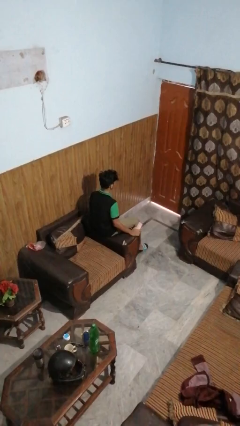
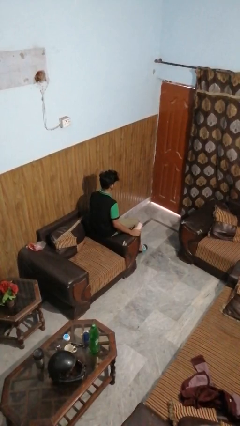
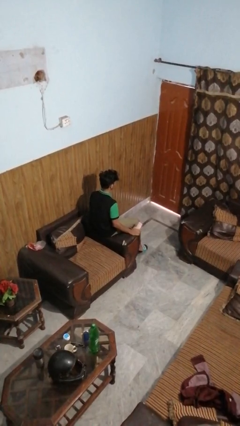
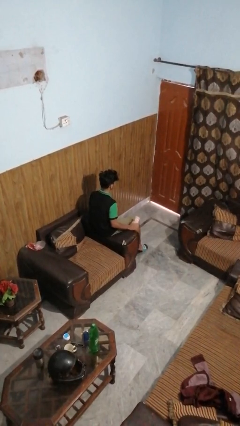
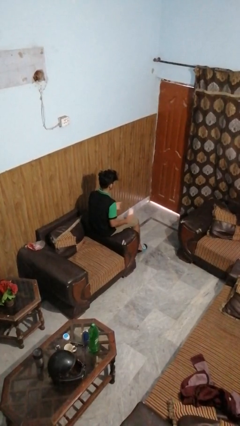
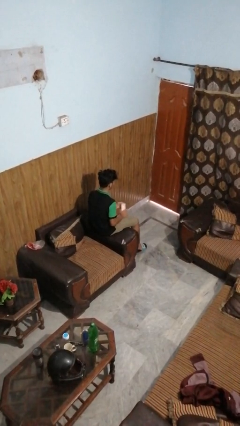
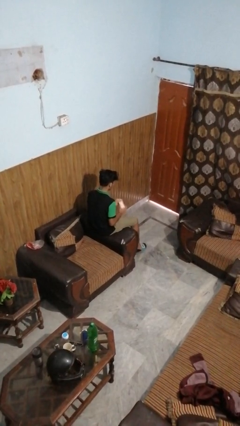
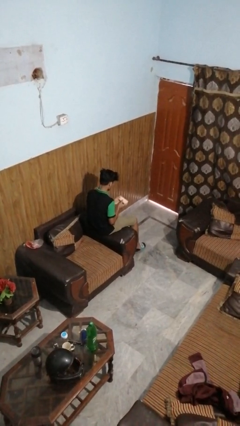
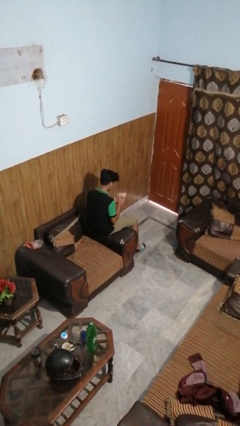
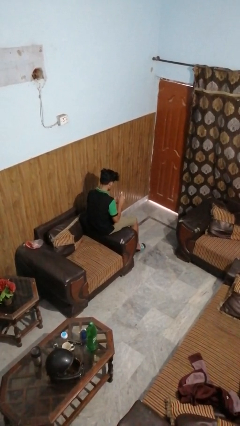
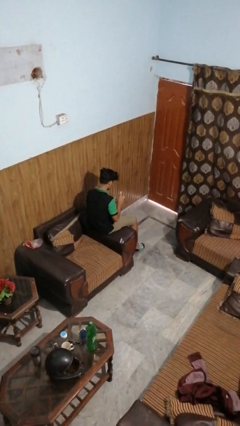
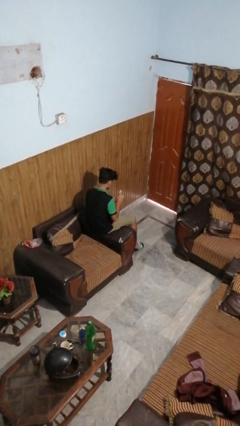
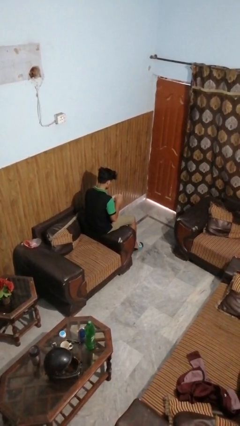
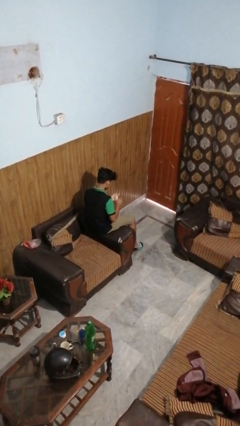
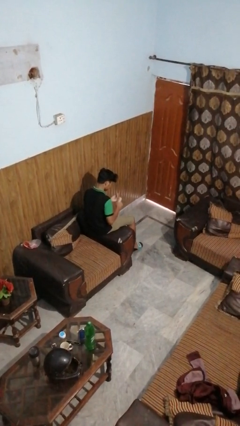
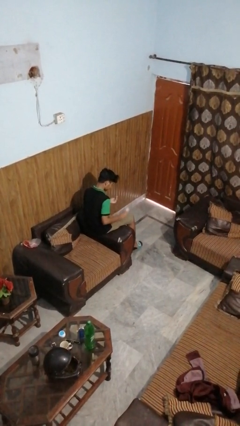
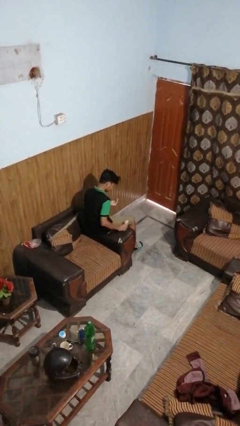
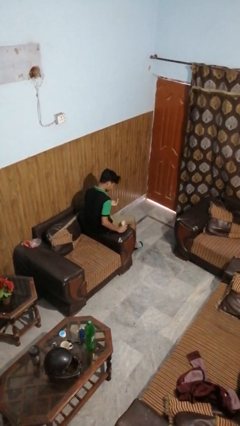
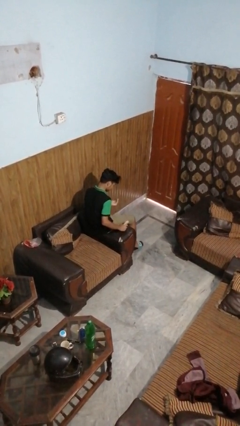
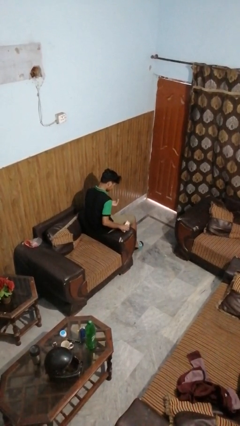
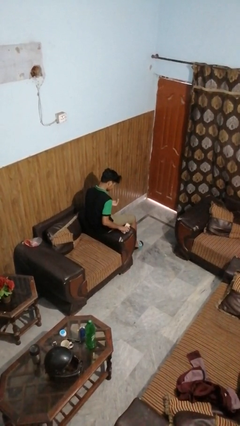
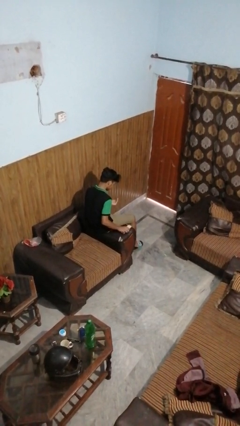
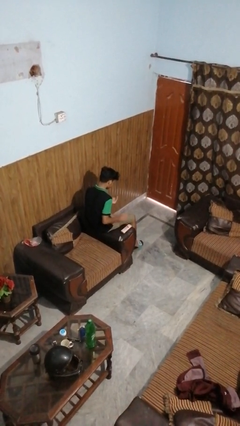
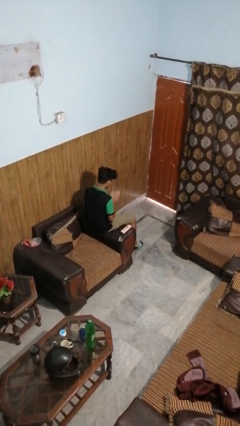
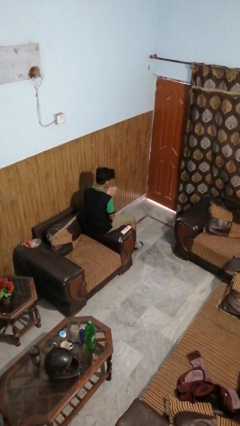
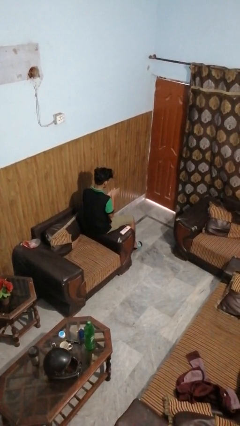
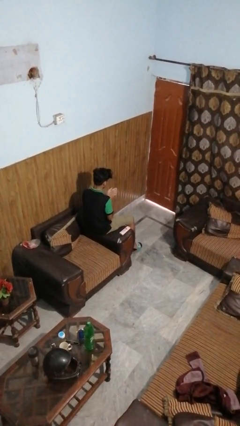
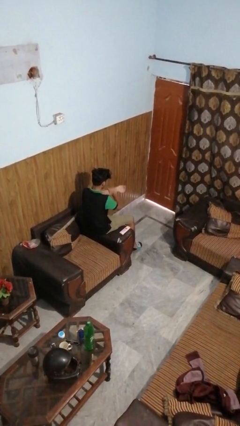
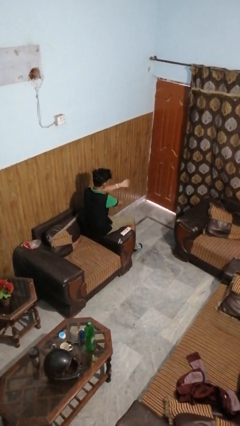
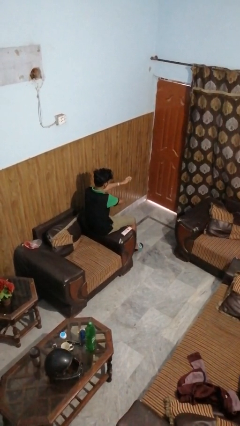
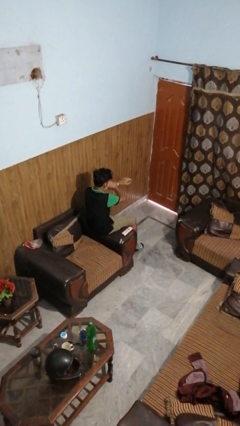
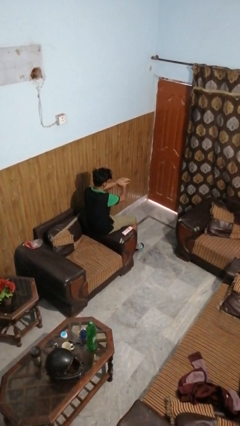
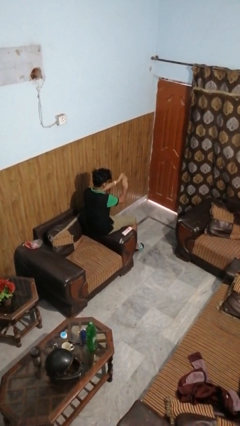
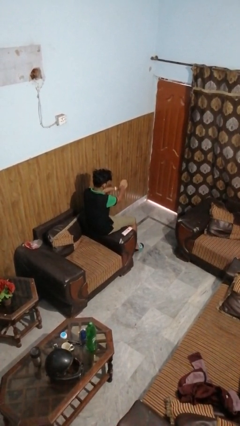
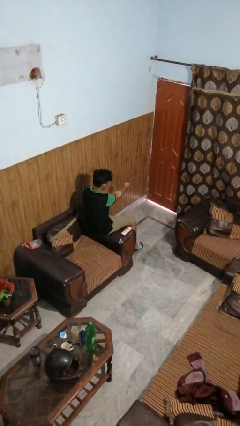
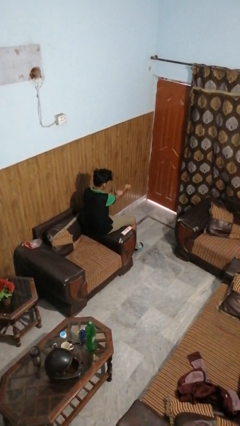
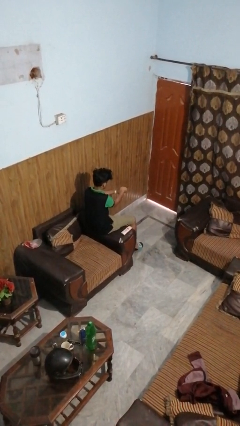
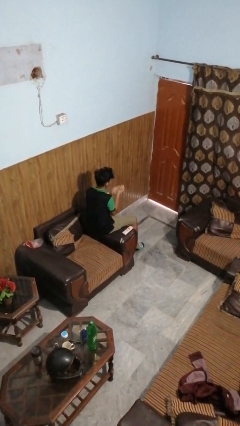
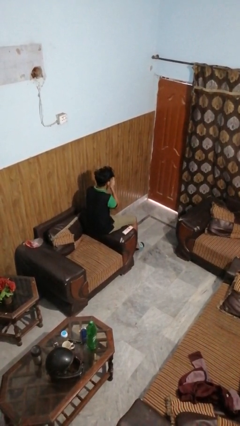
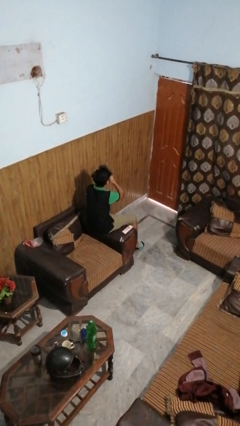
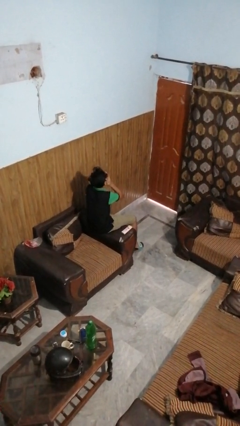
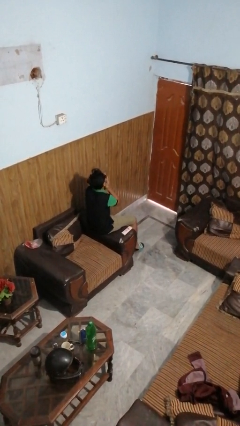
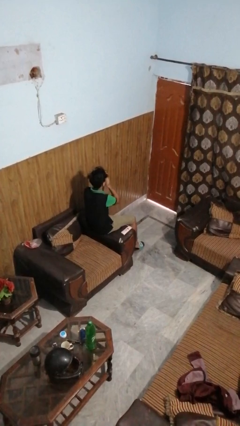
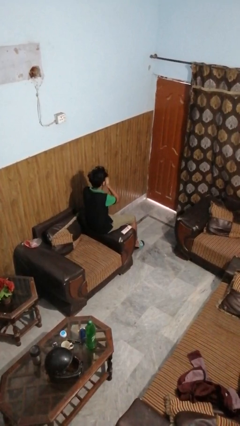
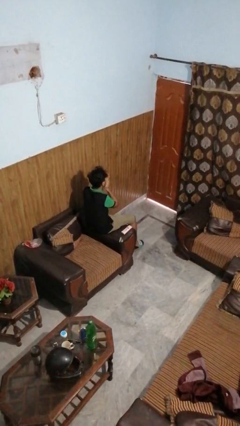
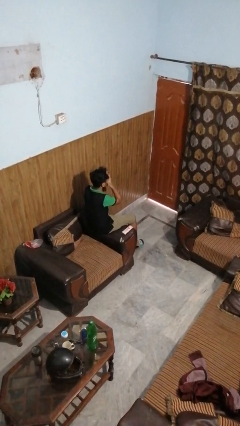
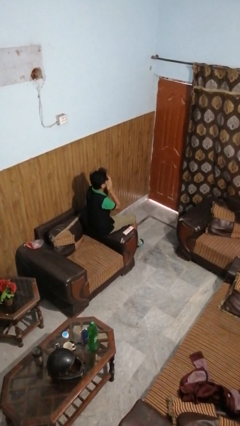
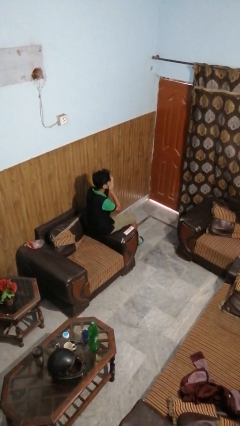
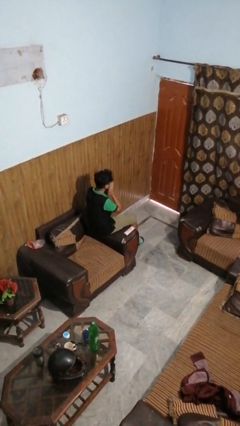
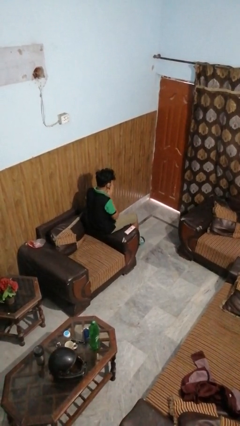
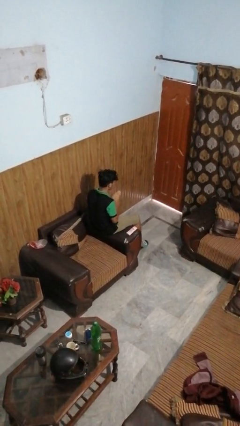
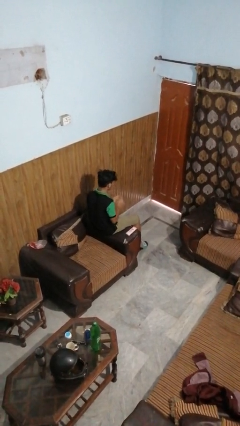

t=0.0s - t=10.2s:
person applies sunscreen

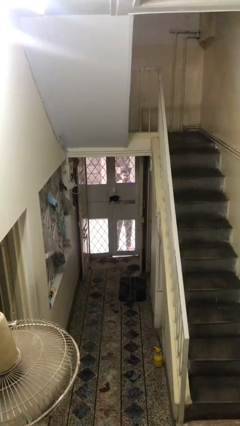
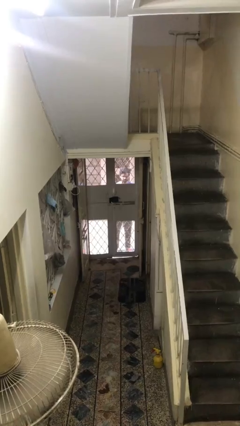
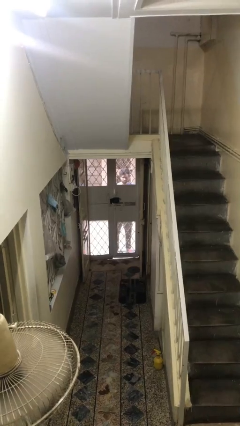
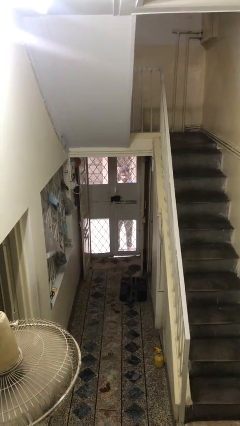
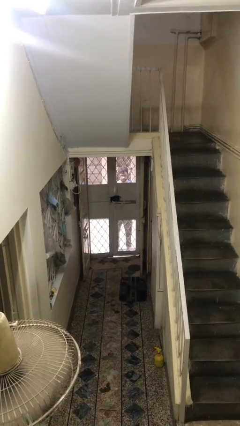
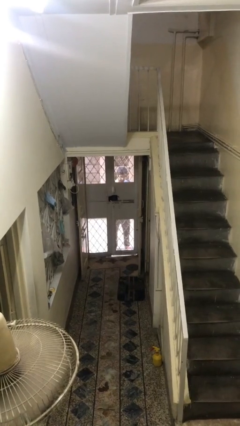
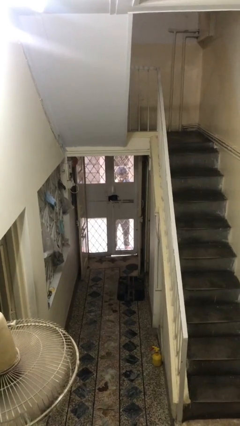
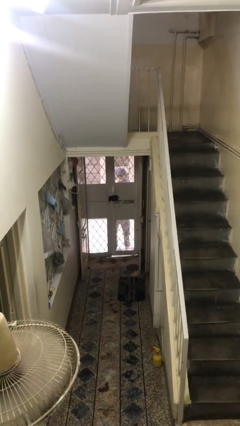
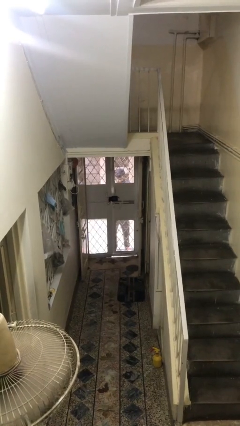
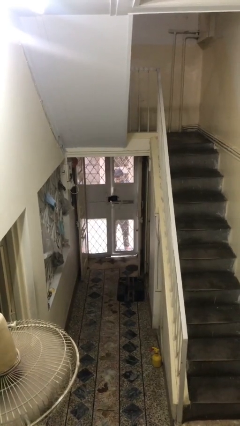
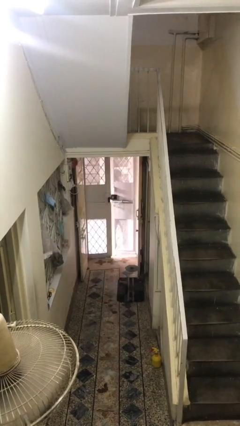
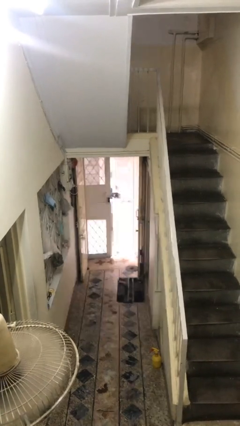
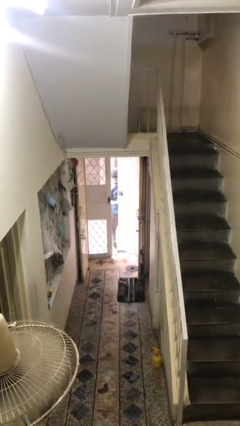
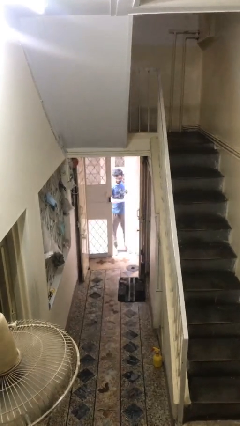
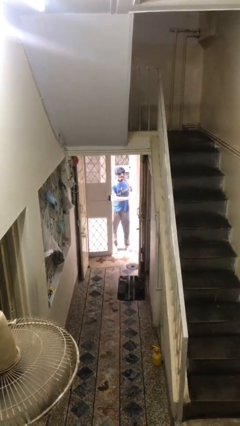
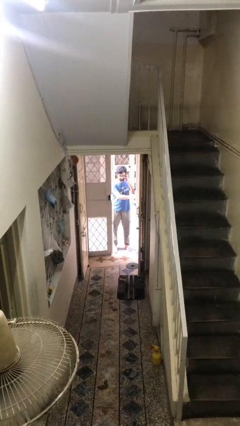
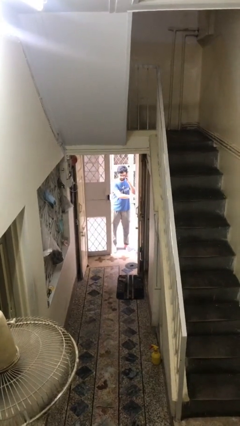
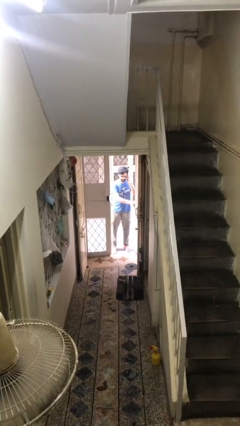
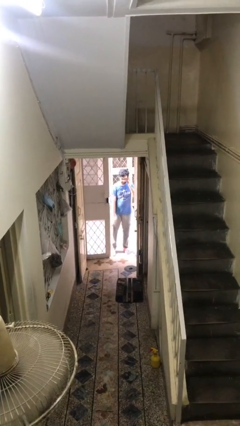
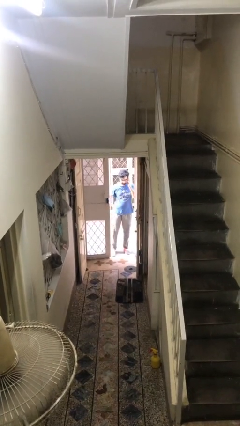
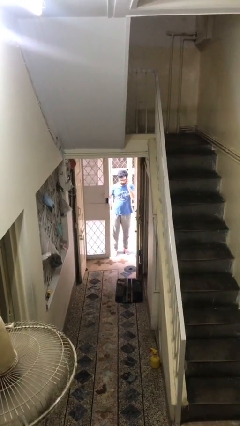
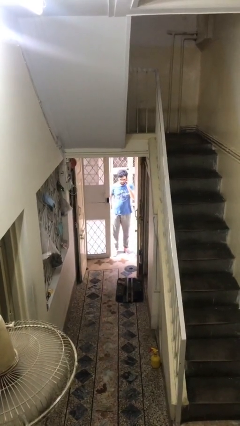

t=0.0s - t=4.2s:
person opens facility door

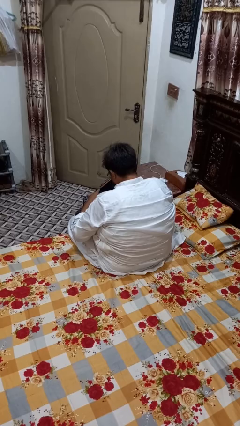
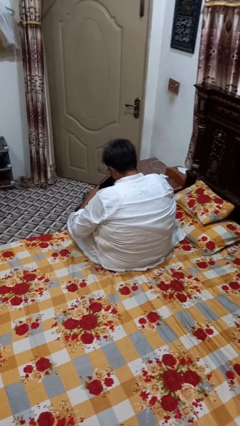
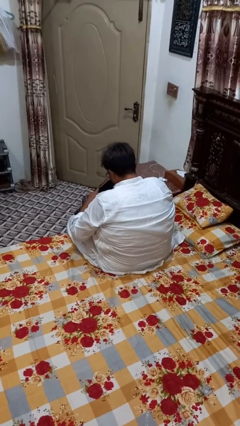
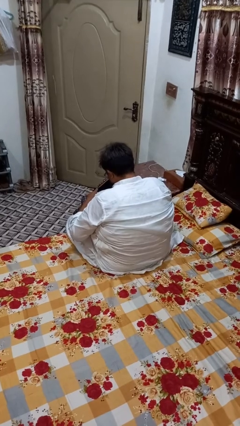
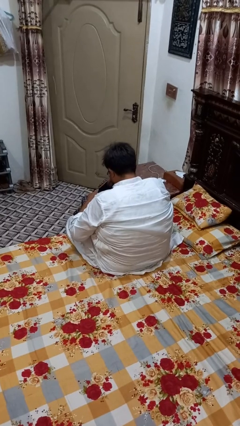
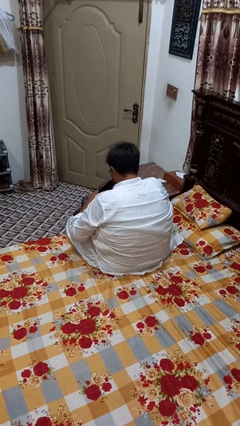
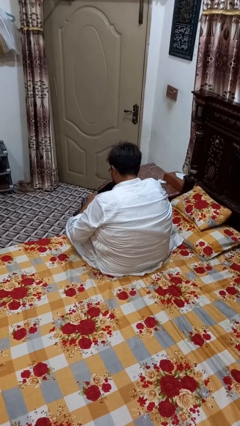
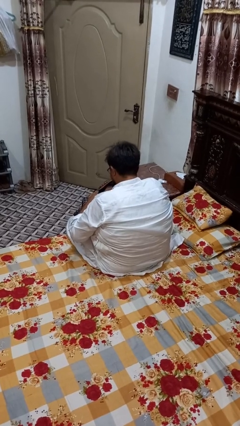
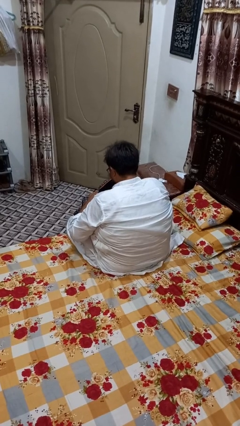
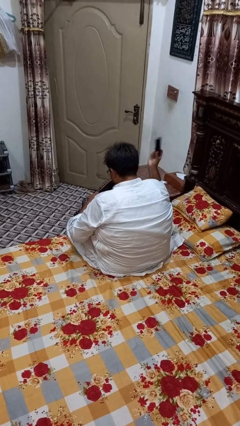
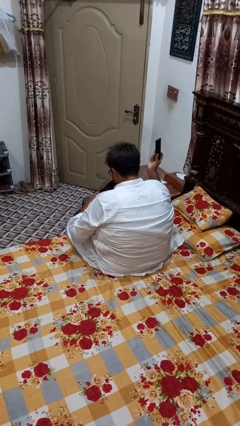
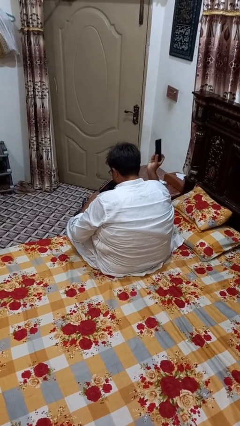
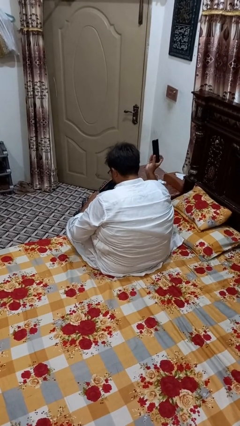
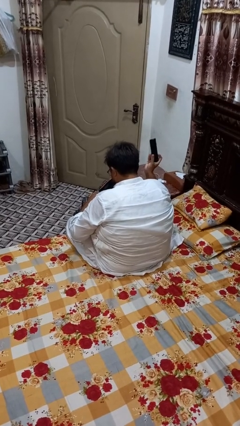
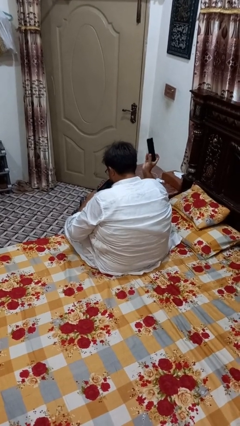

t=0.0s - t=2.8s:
person takes object from bag

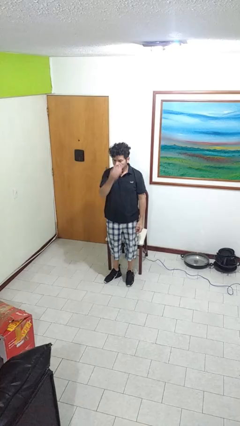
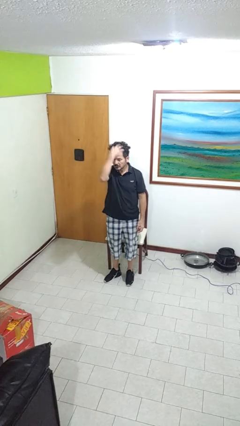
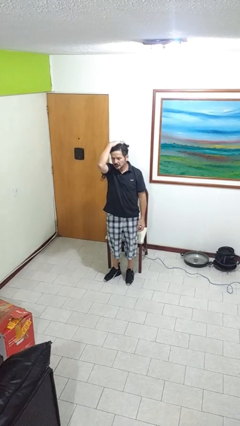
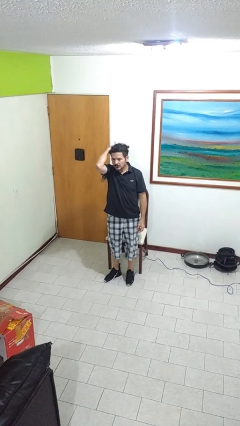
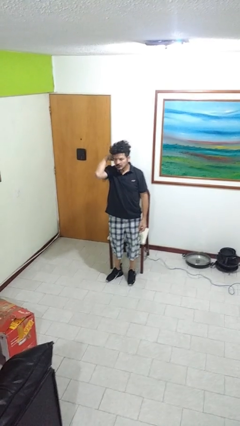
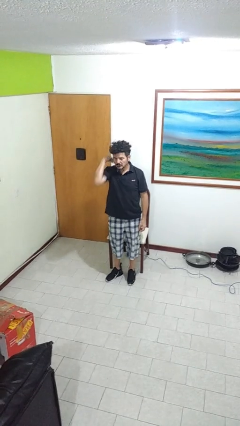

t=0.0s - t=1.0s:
person strokes hair
